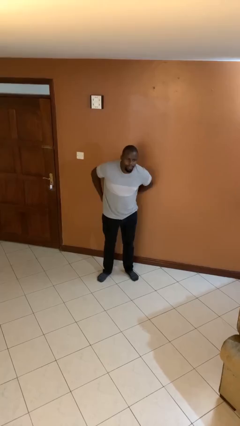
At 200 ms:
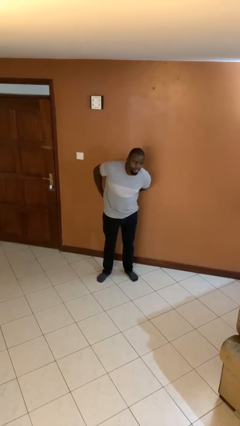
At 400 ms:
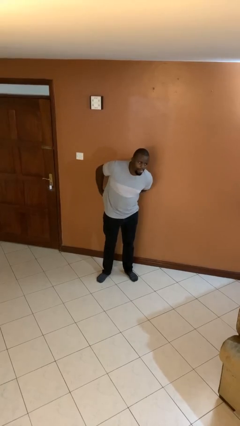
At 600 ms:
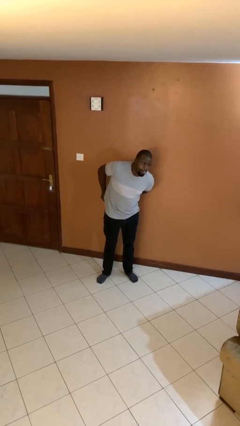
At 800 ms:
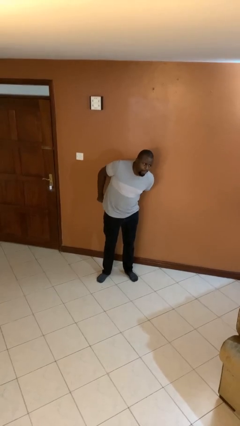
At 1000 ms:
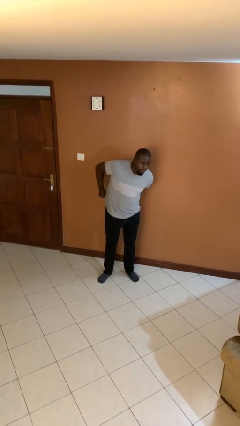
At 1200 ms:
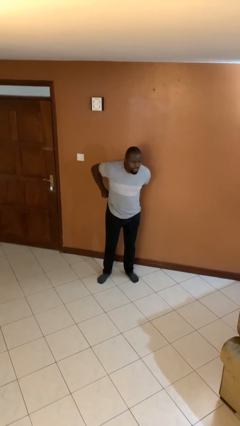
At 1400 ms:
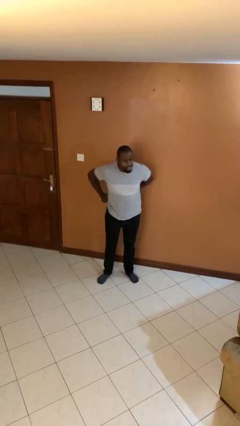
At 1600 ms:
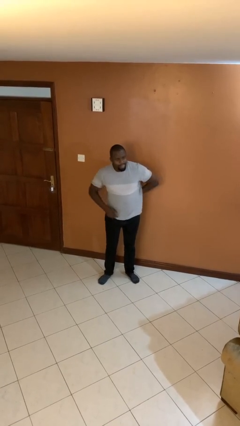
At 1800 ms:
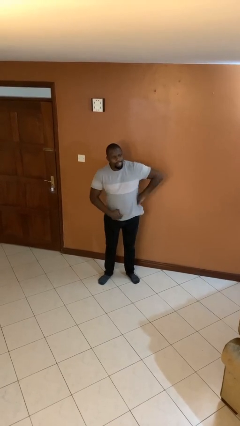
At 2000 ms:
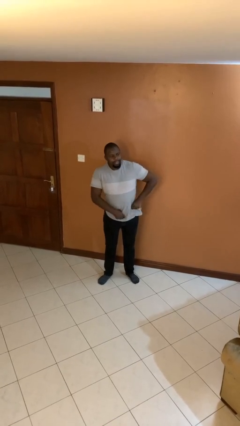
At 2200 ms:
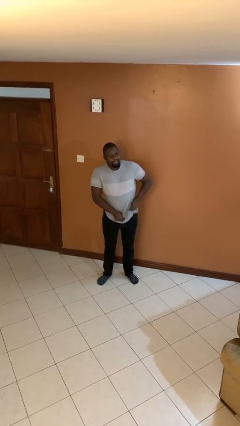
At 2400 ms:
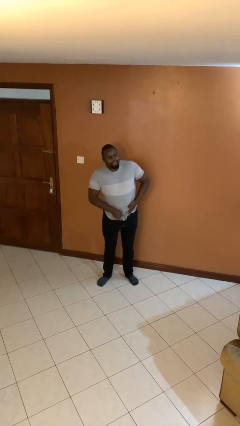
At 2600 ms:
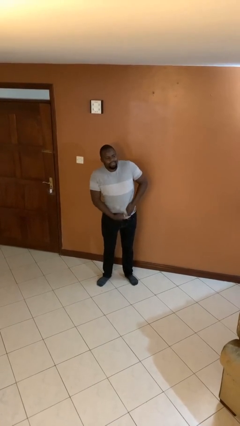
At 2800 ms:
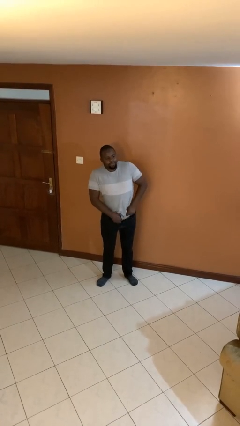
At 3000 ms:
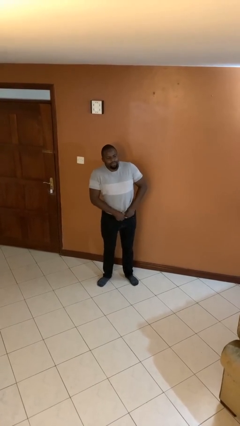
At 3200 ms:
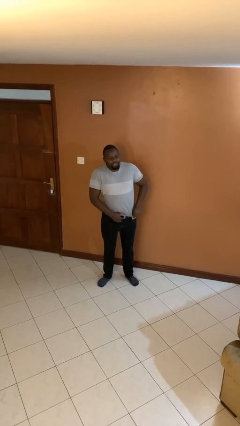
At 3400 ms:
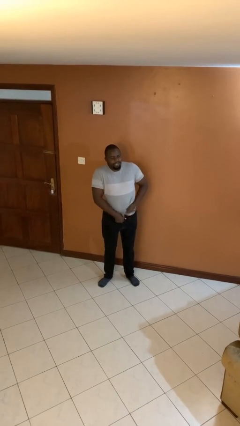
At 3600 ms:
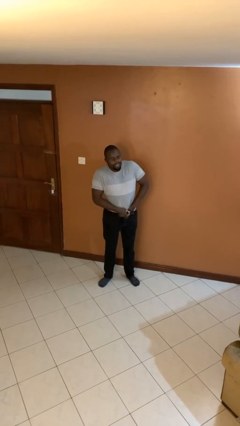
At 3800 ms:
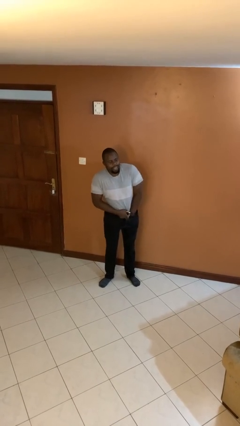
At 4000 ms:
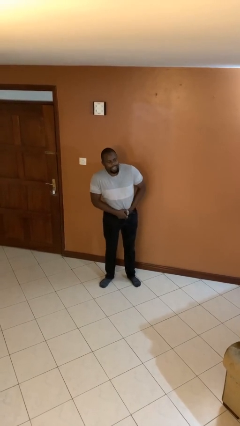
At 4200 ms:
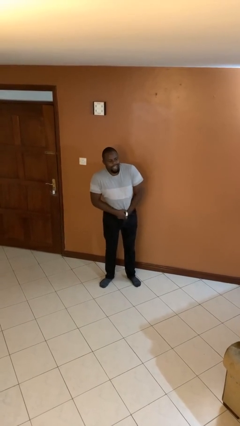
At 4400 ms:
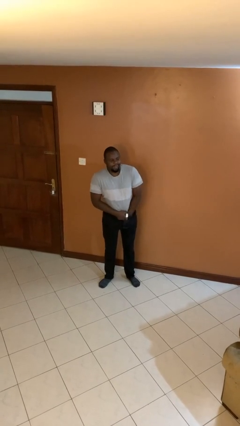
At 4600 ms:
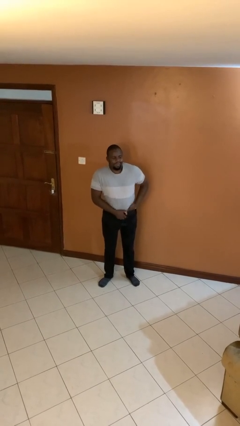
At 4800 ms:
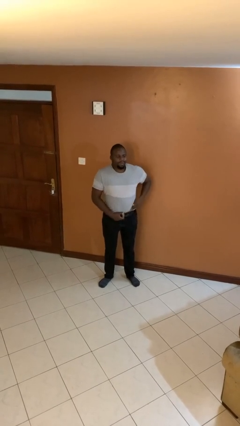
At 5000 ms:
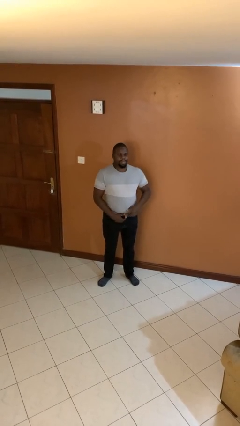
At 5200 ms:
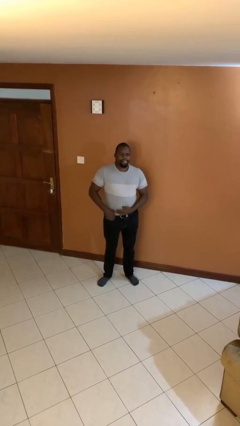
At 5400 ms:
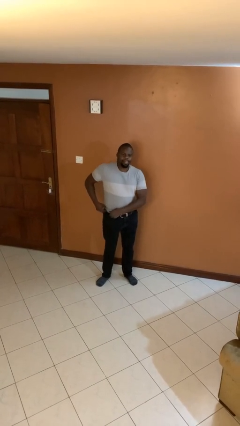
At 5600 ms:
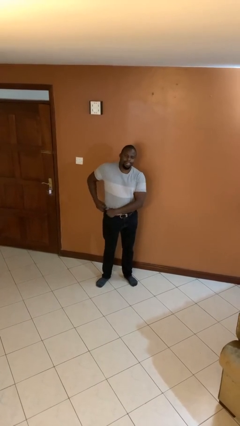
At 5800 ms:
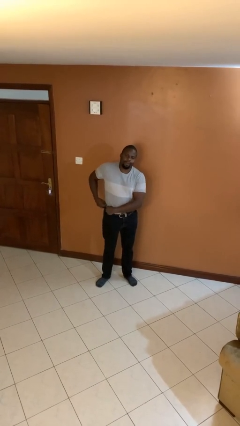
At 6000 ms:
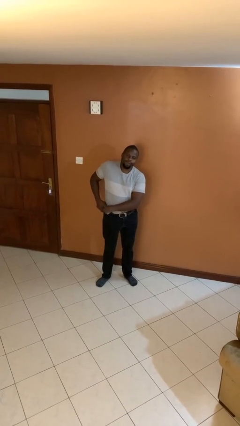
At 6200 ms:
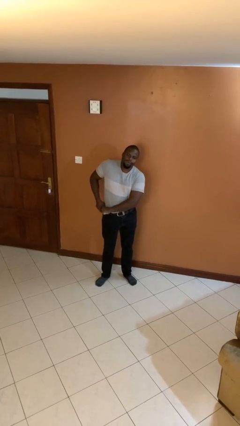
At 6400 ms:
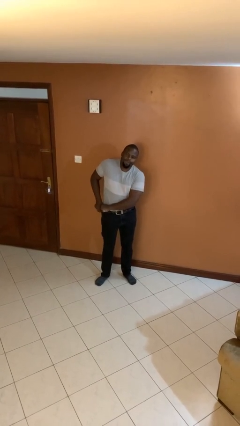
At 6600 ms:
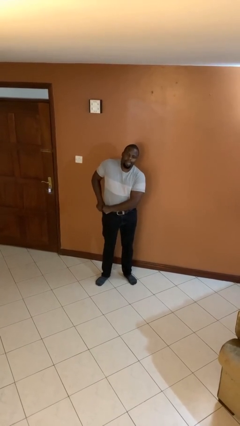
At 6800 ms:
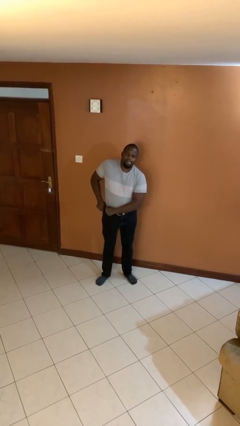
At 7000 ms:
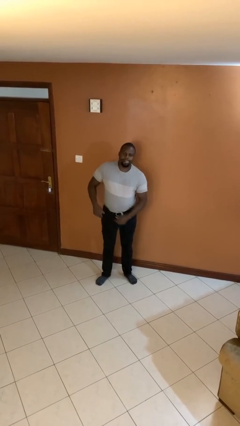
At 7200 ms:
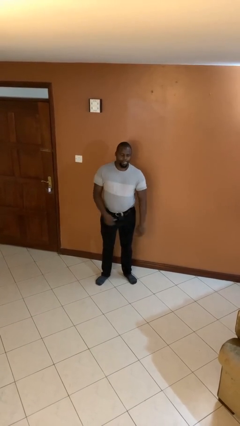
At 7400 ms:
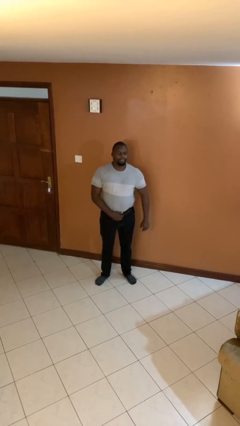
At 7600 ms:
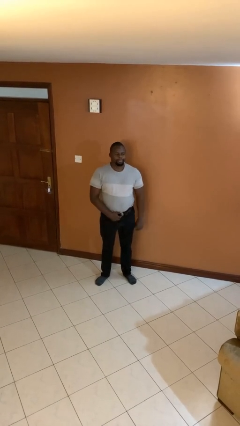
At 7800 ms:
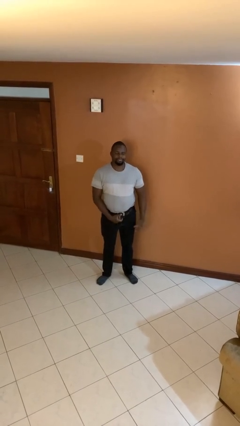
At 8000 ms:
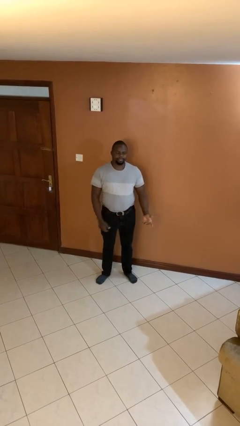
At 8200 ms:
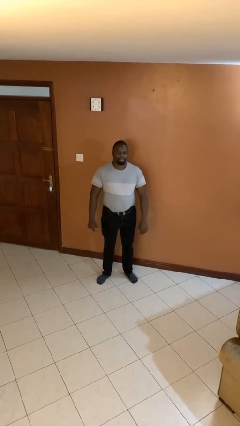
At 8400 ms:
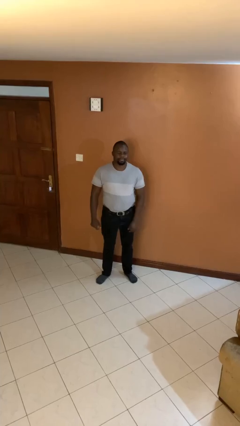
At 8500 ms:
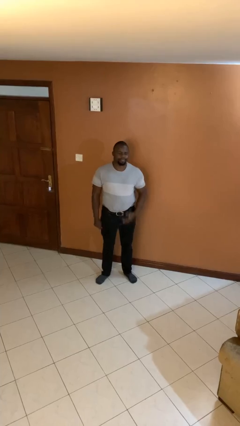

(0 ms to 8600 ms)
person tucks in shirt

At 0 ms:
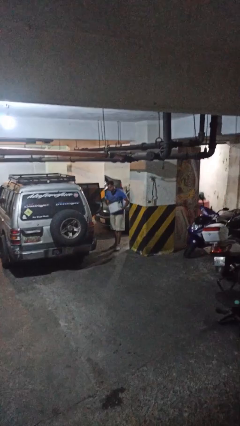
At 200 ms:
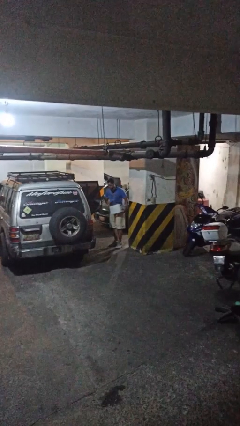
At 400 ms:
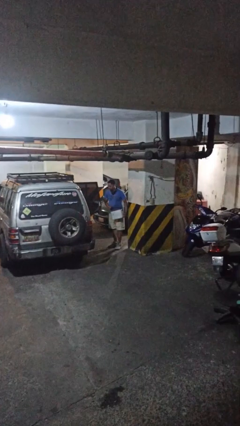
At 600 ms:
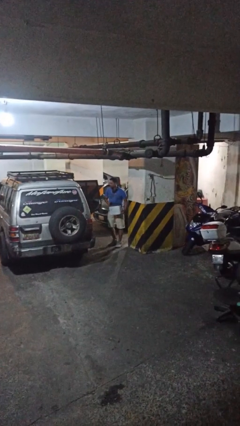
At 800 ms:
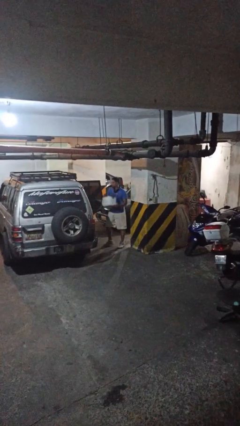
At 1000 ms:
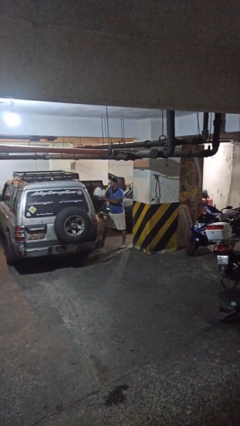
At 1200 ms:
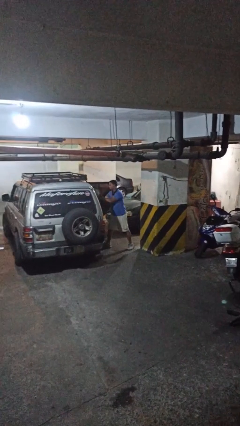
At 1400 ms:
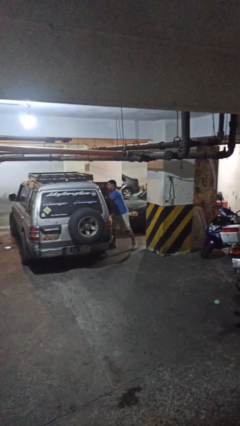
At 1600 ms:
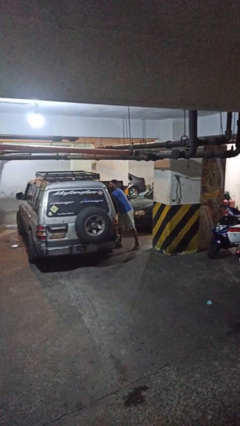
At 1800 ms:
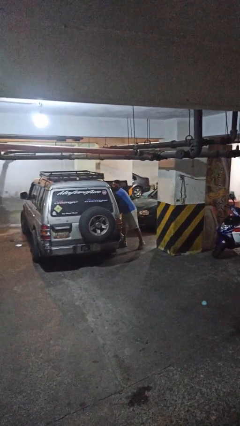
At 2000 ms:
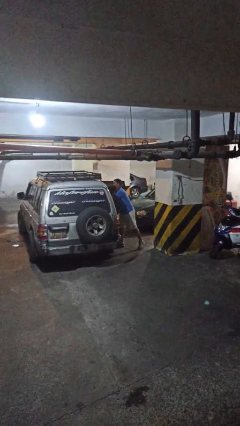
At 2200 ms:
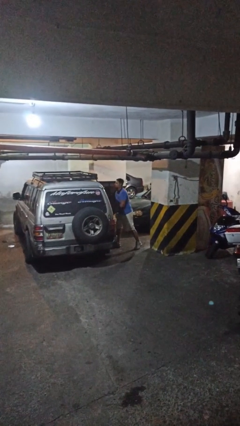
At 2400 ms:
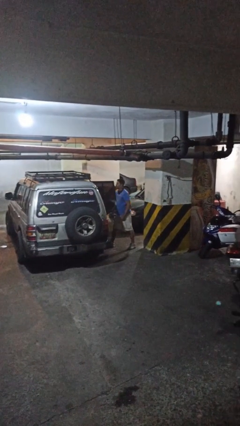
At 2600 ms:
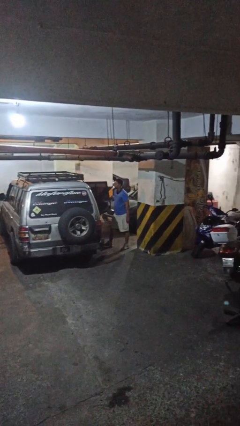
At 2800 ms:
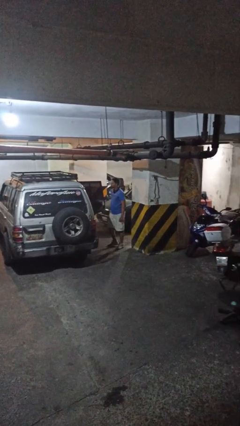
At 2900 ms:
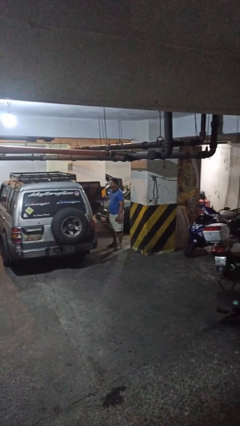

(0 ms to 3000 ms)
person loads car

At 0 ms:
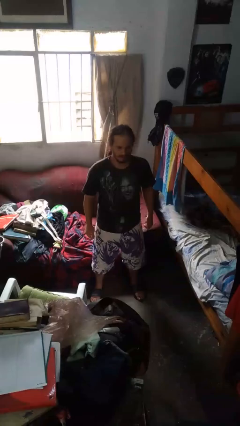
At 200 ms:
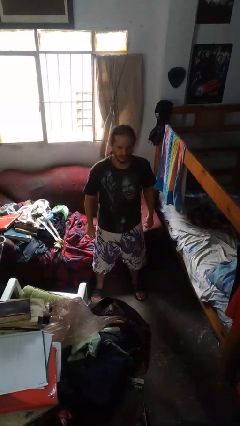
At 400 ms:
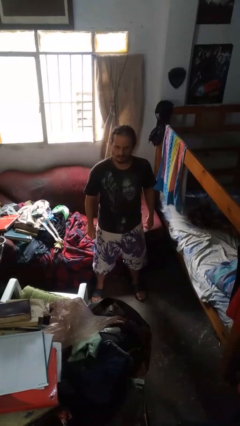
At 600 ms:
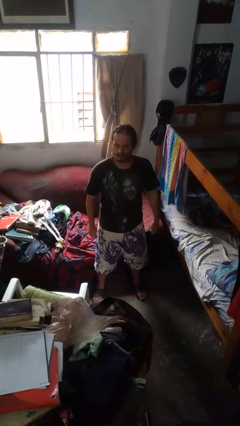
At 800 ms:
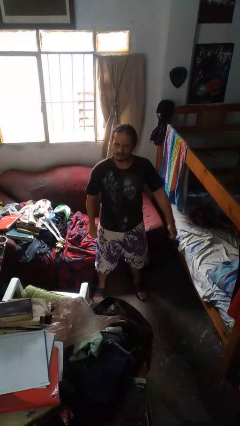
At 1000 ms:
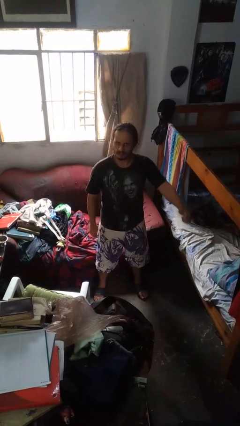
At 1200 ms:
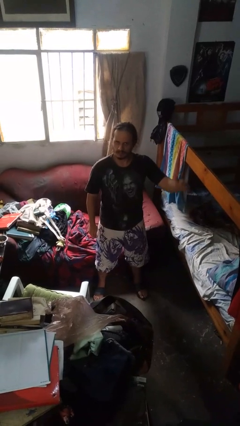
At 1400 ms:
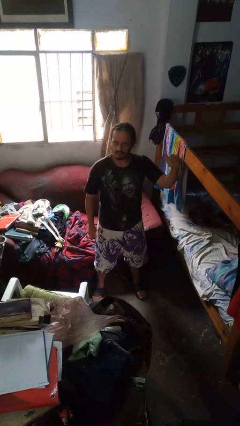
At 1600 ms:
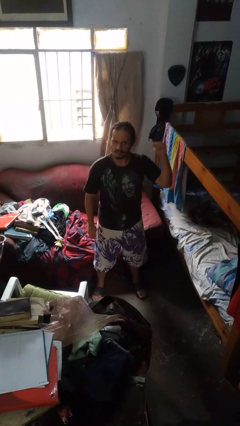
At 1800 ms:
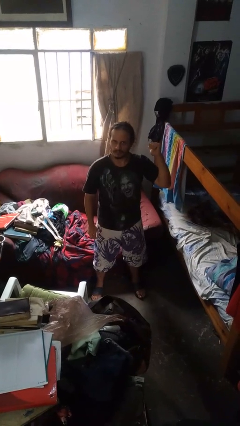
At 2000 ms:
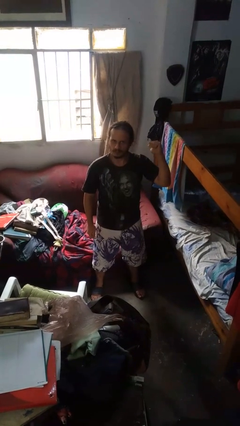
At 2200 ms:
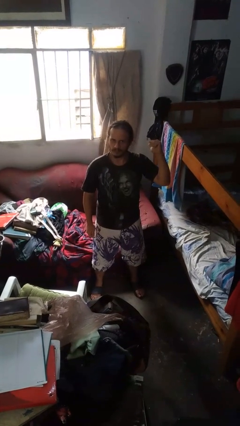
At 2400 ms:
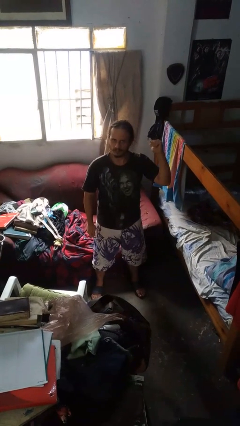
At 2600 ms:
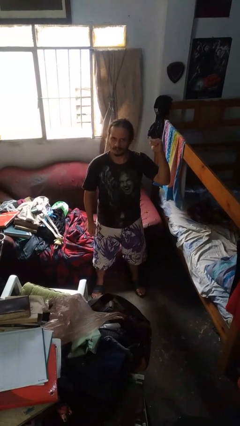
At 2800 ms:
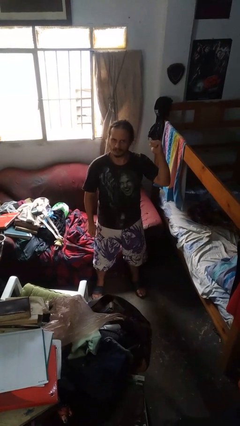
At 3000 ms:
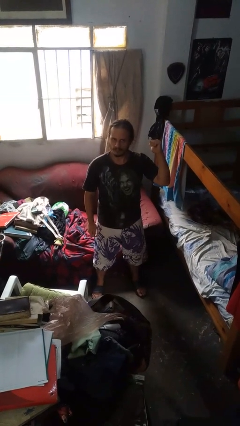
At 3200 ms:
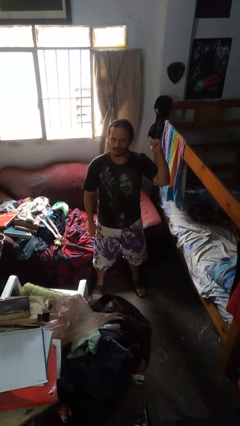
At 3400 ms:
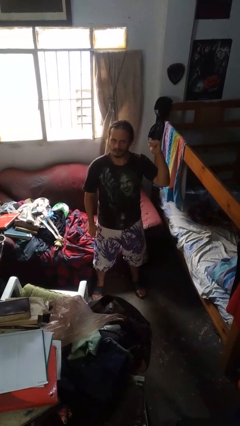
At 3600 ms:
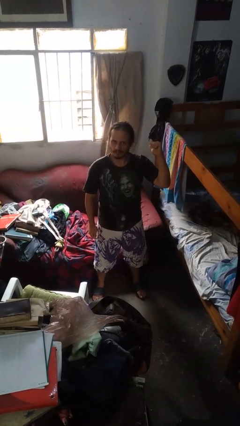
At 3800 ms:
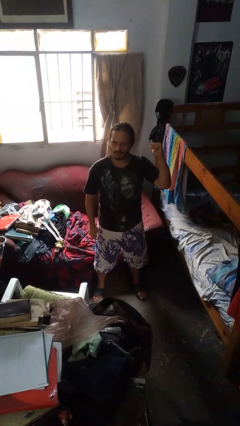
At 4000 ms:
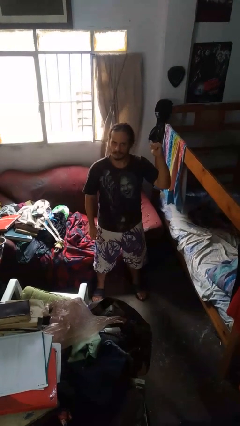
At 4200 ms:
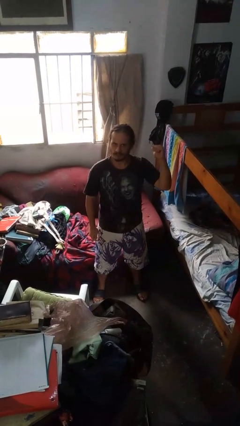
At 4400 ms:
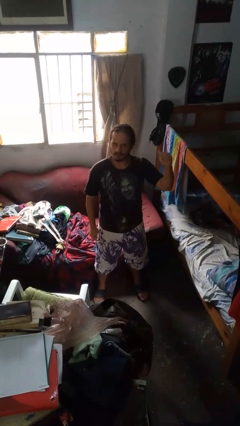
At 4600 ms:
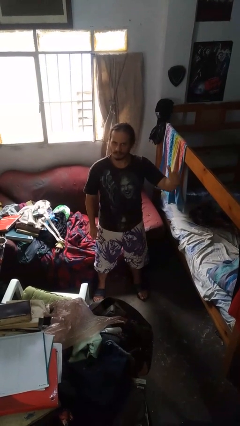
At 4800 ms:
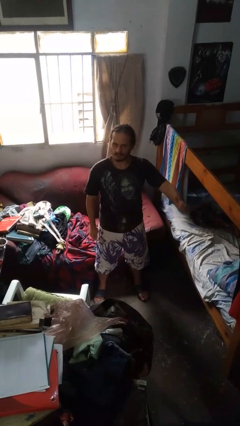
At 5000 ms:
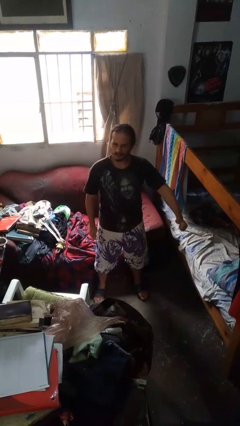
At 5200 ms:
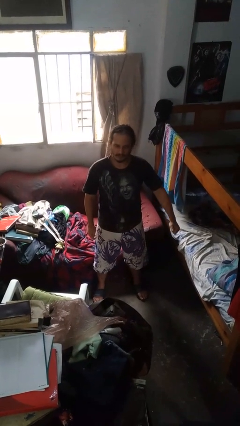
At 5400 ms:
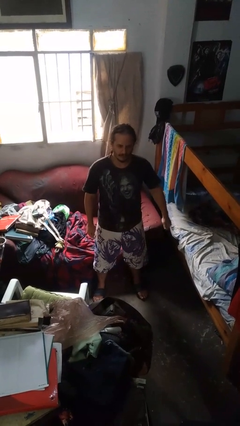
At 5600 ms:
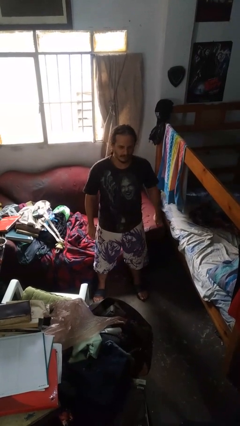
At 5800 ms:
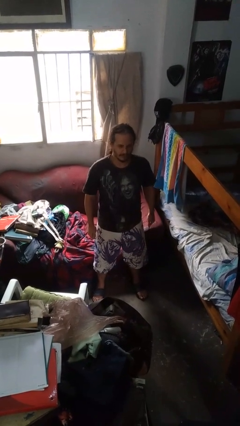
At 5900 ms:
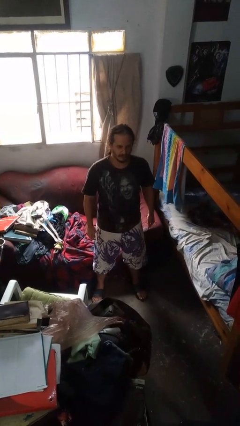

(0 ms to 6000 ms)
person gestures behind me

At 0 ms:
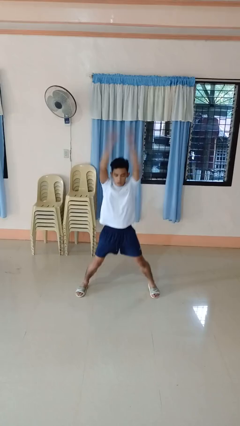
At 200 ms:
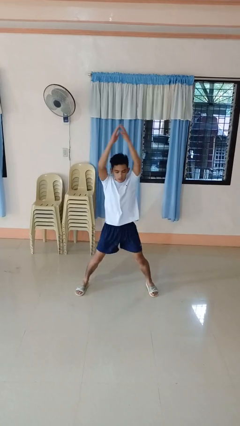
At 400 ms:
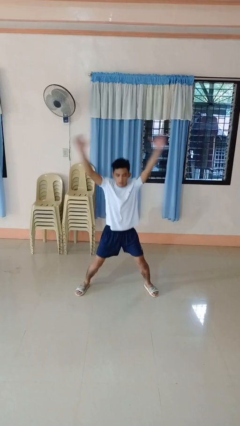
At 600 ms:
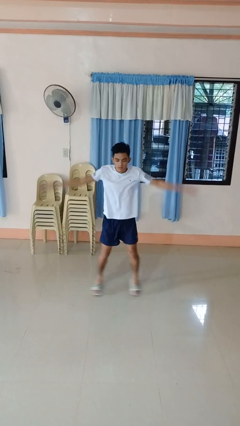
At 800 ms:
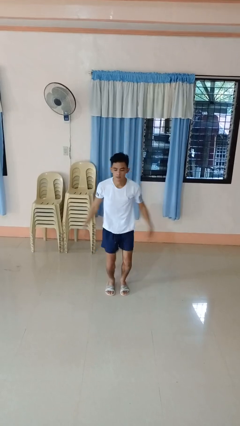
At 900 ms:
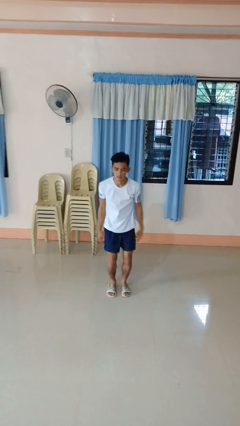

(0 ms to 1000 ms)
person exercises with jumping jacks
